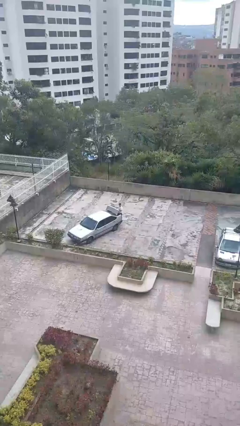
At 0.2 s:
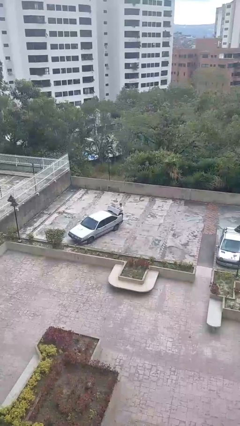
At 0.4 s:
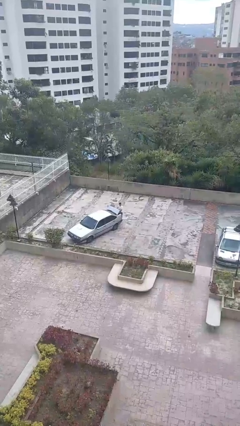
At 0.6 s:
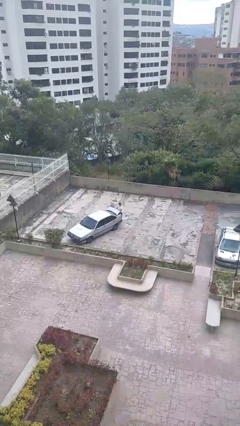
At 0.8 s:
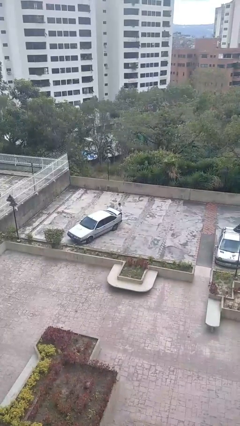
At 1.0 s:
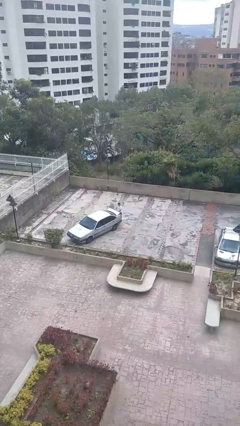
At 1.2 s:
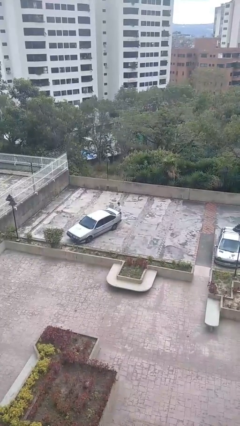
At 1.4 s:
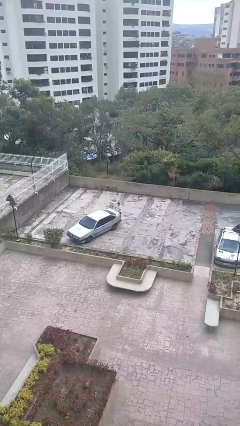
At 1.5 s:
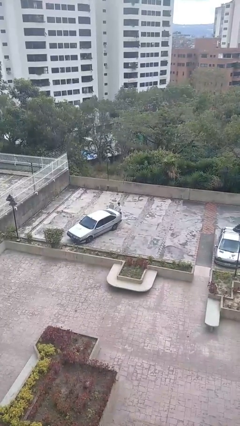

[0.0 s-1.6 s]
person closes car trunk

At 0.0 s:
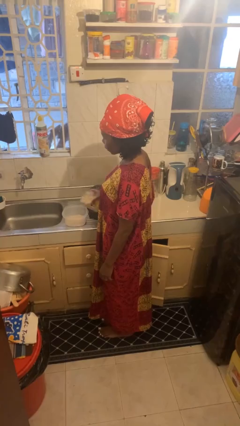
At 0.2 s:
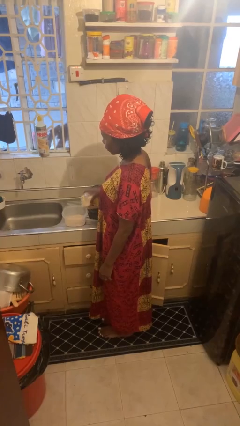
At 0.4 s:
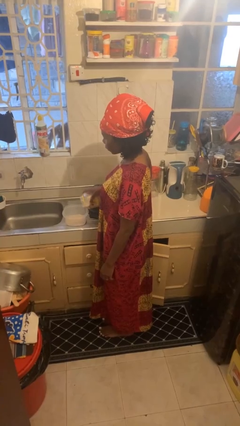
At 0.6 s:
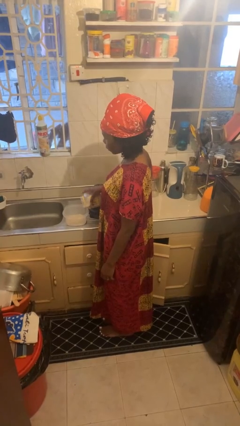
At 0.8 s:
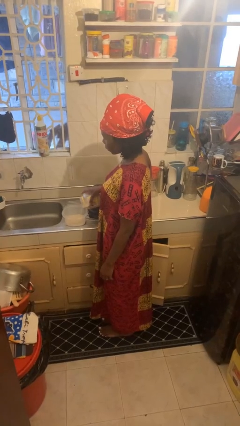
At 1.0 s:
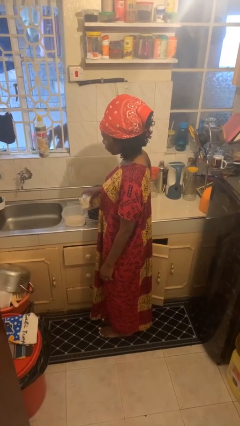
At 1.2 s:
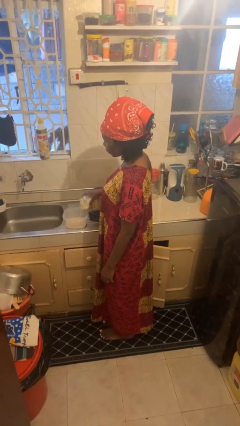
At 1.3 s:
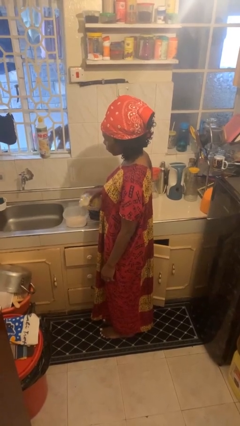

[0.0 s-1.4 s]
person pours into bowl

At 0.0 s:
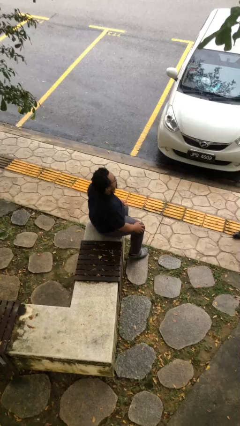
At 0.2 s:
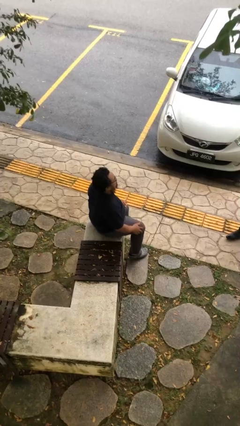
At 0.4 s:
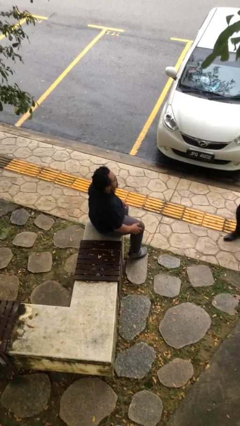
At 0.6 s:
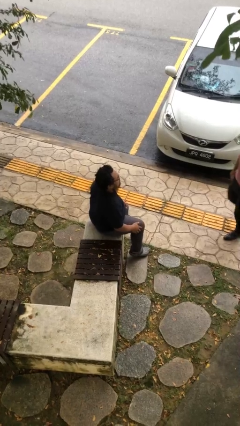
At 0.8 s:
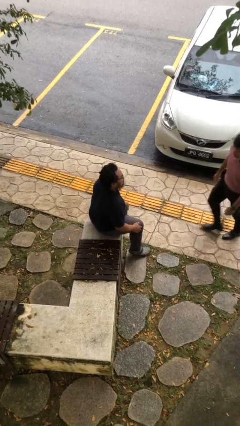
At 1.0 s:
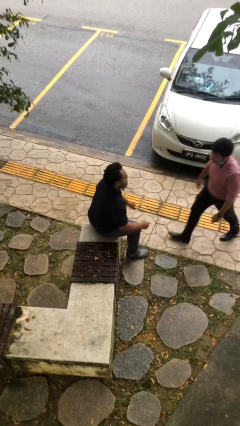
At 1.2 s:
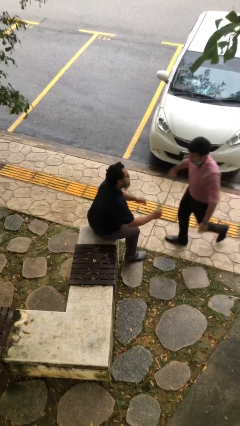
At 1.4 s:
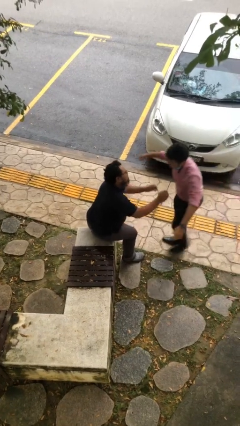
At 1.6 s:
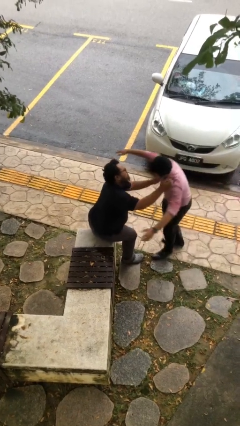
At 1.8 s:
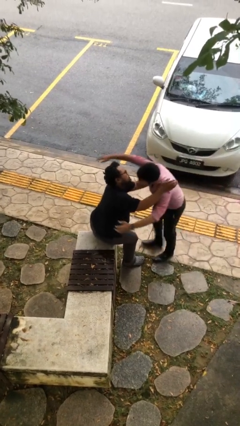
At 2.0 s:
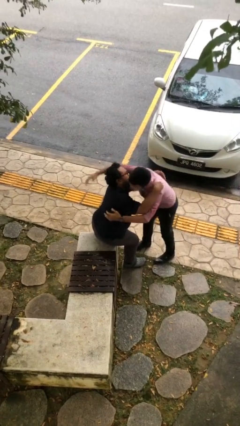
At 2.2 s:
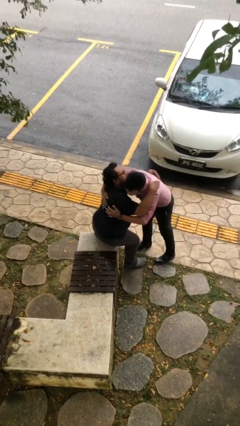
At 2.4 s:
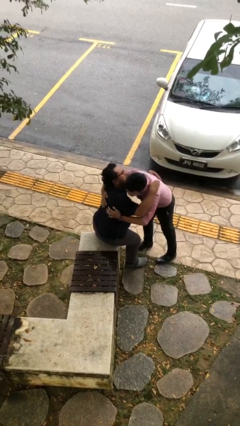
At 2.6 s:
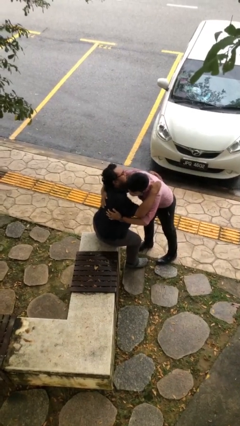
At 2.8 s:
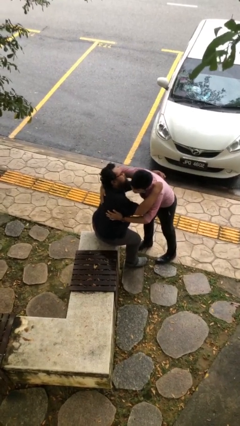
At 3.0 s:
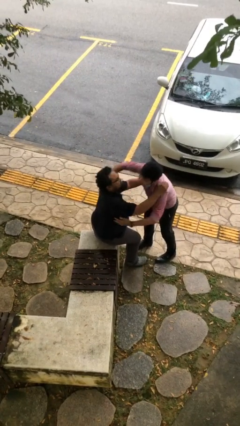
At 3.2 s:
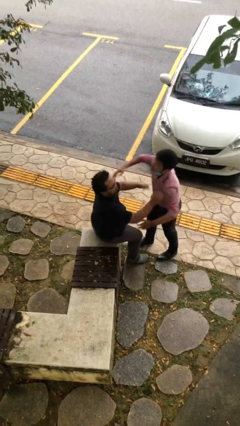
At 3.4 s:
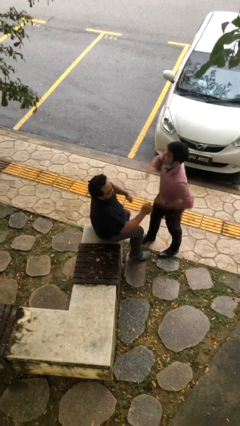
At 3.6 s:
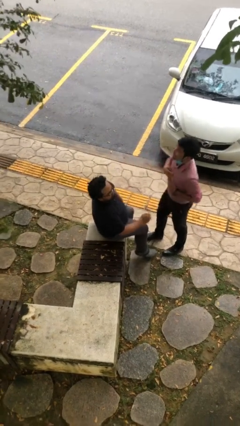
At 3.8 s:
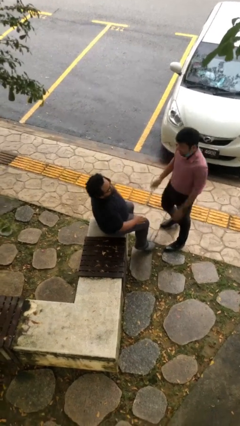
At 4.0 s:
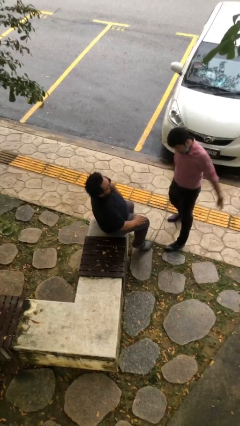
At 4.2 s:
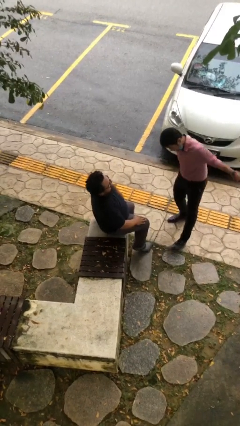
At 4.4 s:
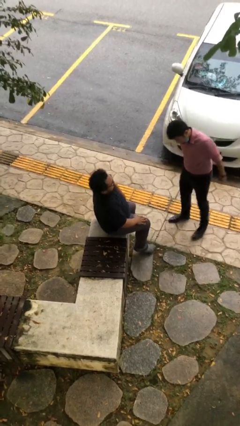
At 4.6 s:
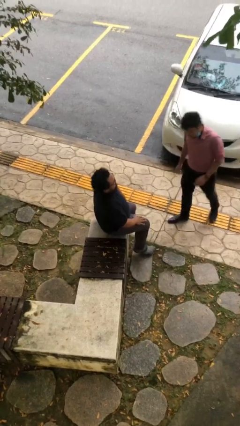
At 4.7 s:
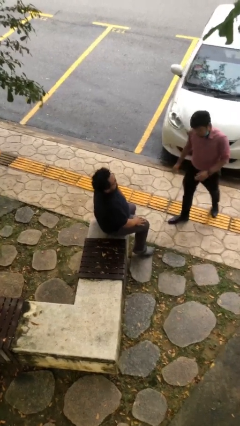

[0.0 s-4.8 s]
person embraces person

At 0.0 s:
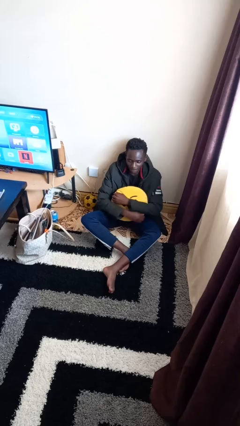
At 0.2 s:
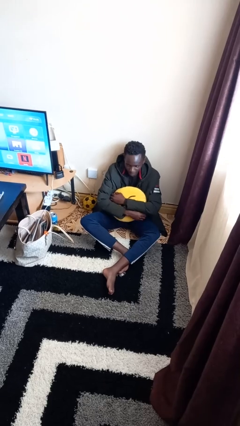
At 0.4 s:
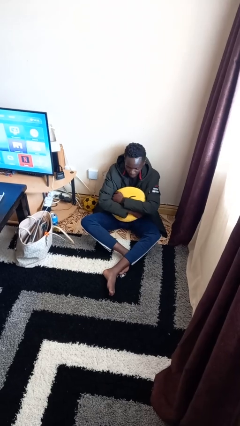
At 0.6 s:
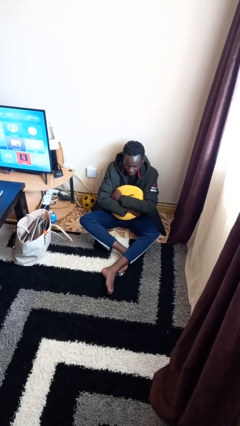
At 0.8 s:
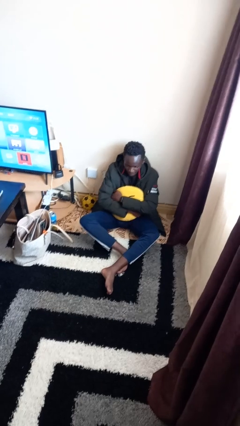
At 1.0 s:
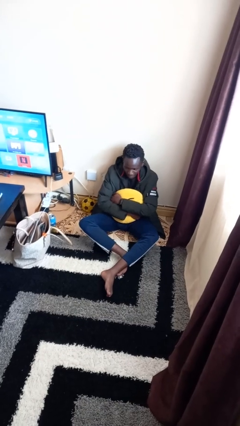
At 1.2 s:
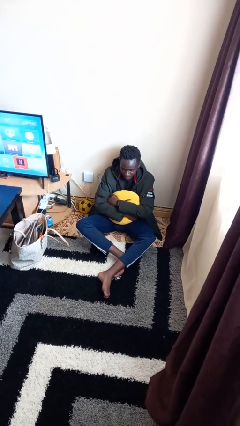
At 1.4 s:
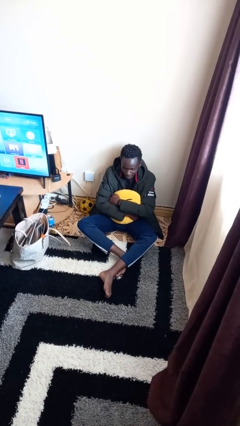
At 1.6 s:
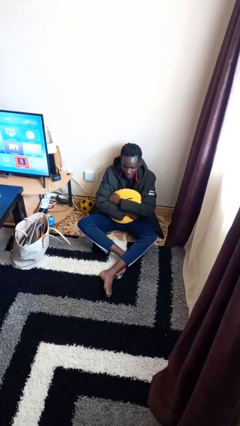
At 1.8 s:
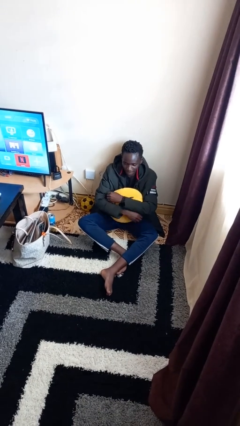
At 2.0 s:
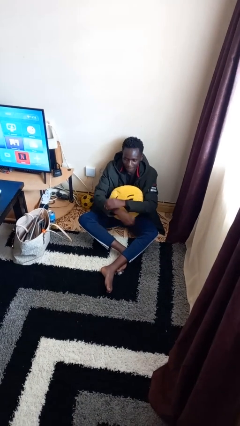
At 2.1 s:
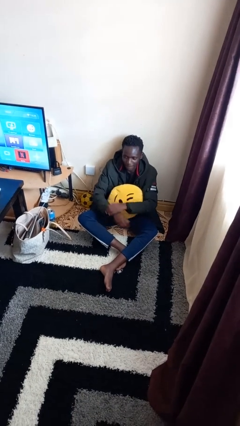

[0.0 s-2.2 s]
person hugs stuffed animal

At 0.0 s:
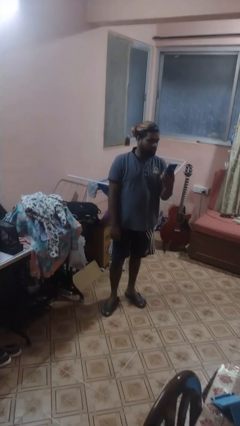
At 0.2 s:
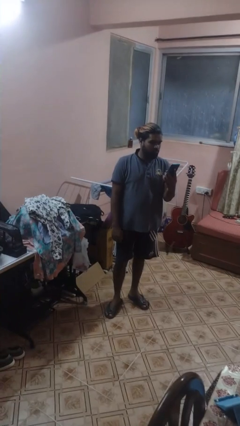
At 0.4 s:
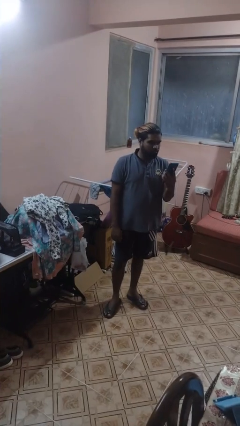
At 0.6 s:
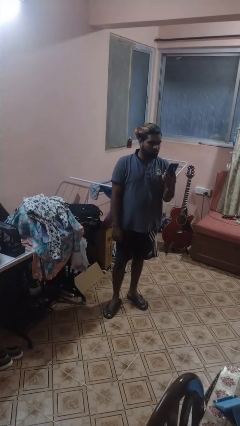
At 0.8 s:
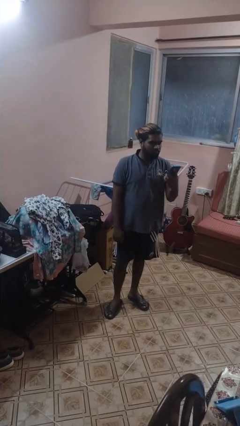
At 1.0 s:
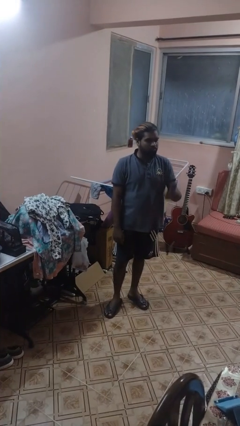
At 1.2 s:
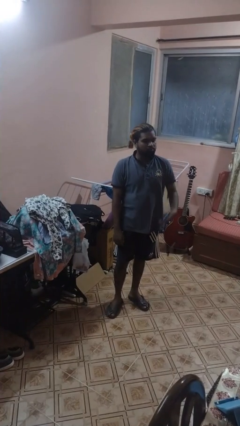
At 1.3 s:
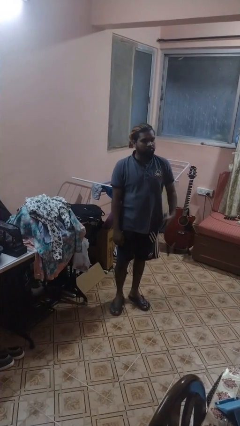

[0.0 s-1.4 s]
person takes phone from pocket

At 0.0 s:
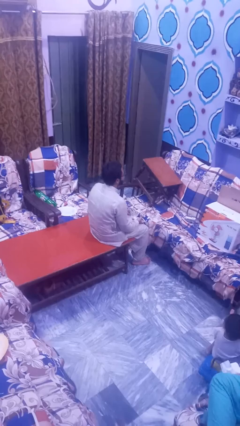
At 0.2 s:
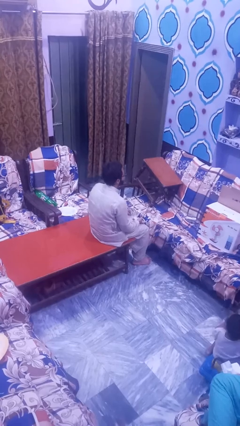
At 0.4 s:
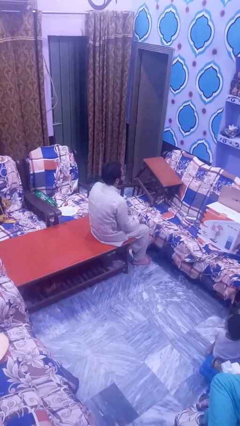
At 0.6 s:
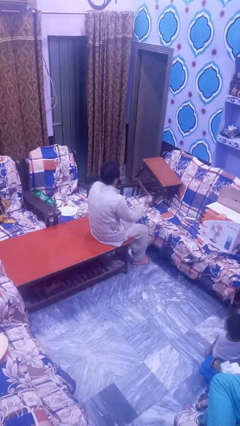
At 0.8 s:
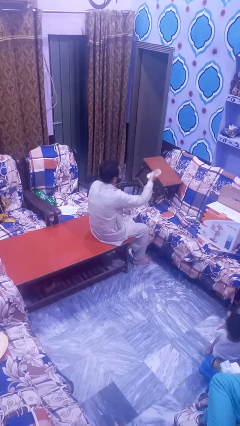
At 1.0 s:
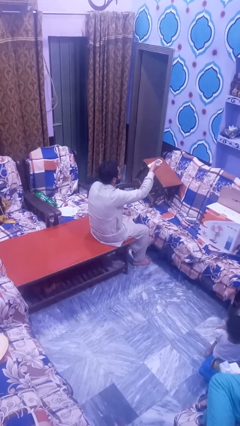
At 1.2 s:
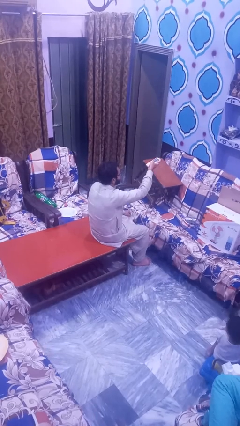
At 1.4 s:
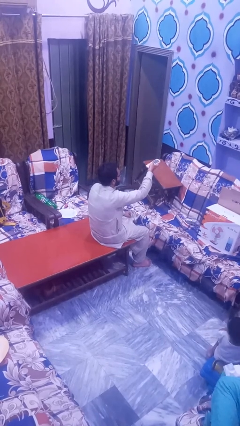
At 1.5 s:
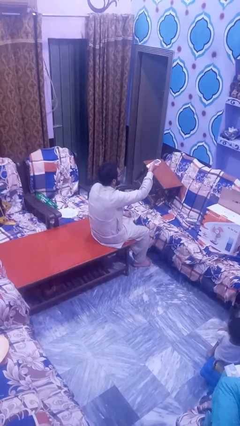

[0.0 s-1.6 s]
person uses television remote

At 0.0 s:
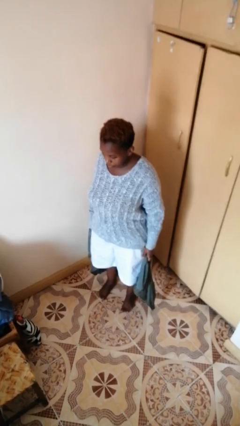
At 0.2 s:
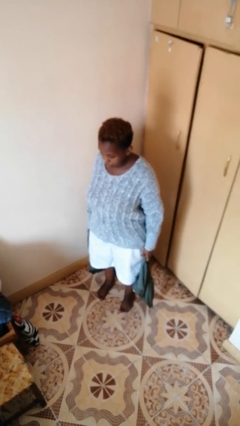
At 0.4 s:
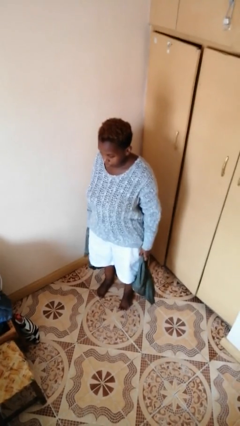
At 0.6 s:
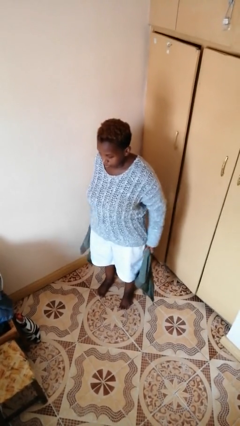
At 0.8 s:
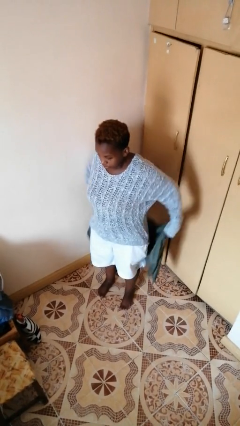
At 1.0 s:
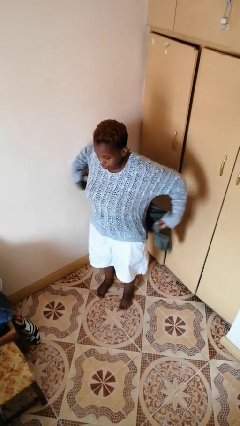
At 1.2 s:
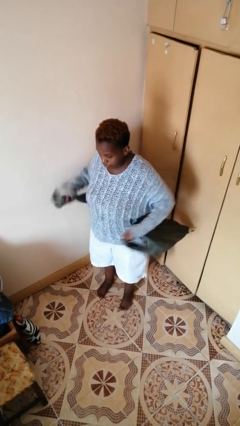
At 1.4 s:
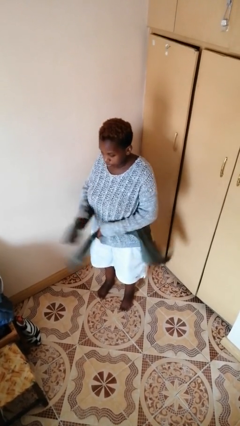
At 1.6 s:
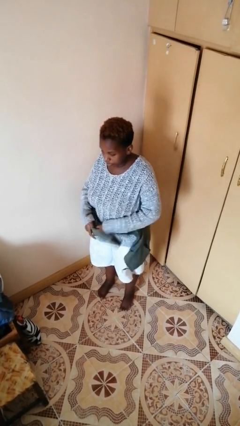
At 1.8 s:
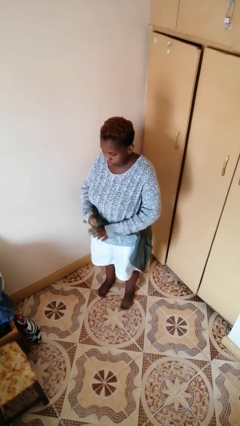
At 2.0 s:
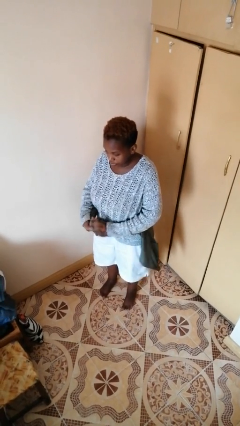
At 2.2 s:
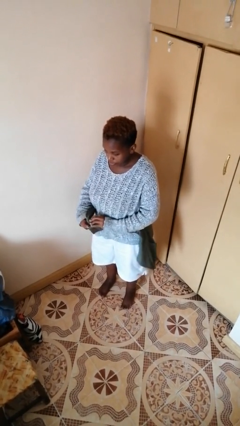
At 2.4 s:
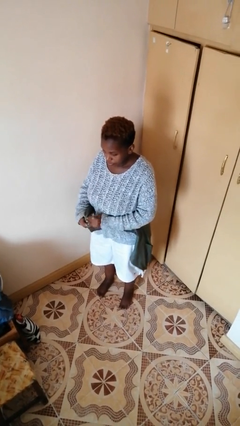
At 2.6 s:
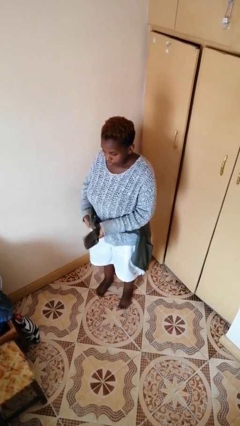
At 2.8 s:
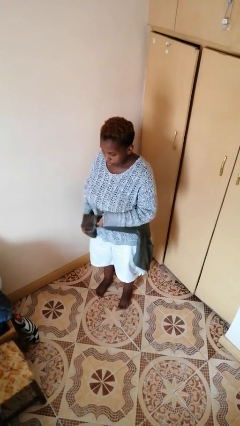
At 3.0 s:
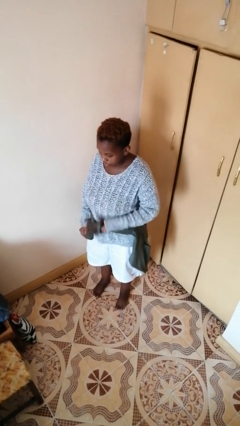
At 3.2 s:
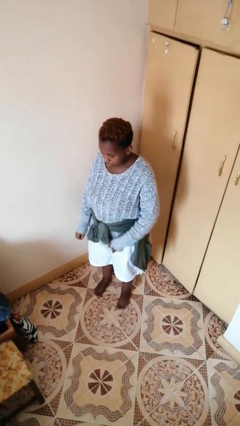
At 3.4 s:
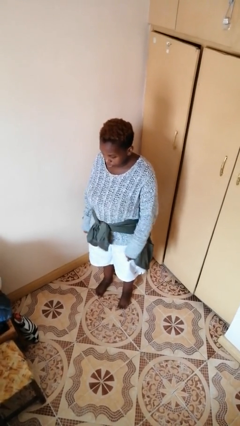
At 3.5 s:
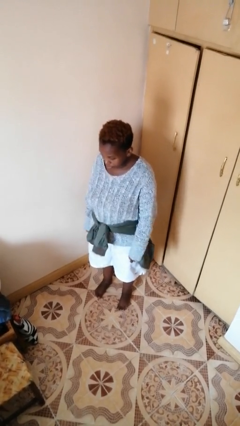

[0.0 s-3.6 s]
person ties jacket around waist

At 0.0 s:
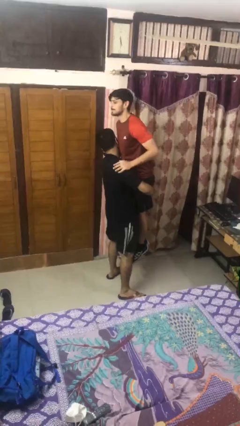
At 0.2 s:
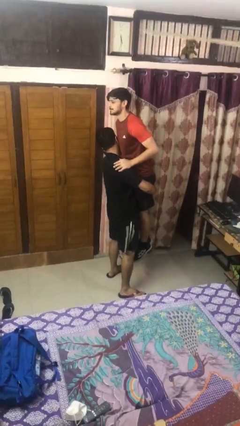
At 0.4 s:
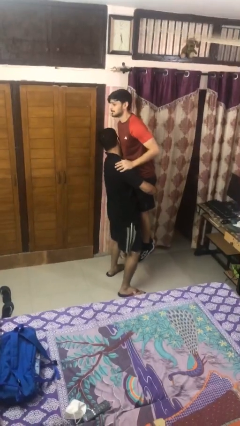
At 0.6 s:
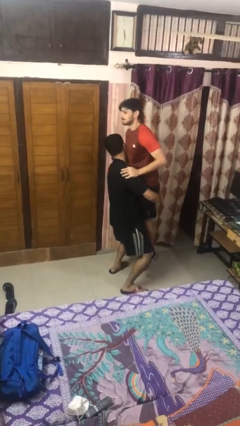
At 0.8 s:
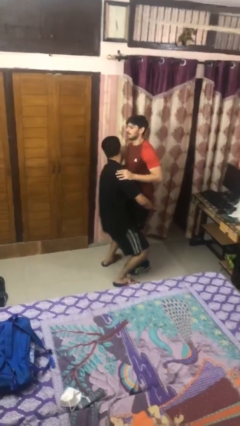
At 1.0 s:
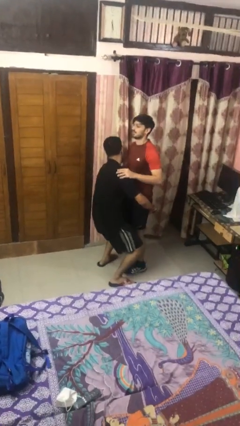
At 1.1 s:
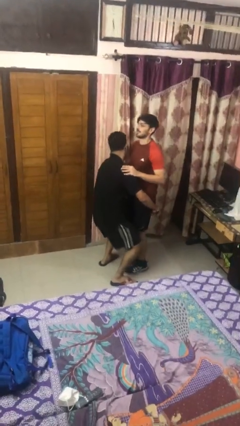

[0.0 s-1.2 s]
person puts down person
